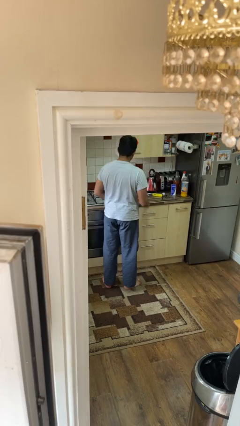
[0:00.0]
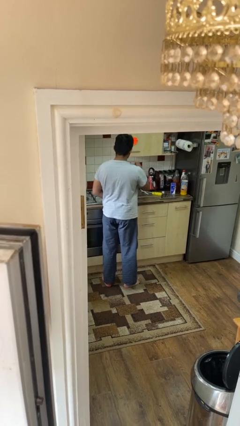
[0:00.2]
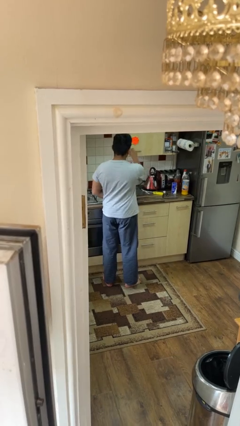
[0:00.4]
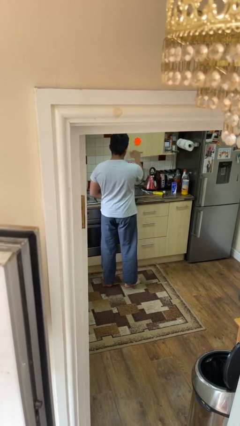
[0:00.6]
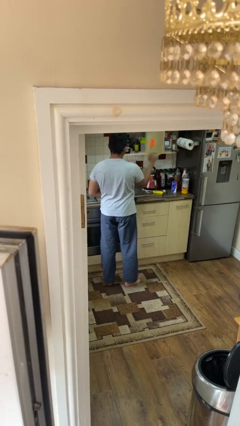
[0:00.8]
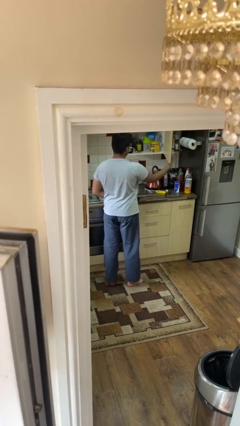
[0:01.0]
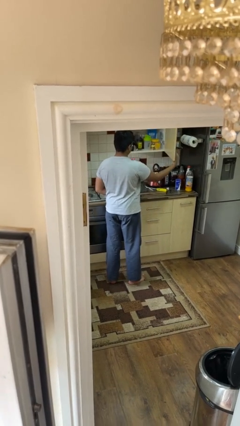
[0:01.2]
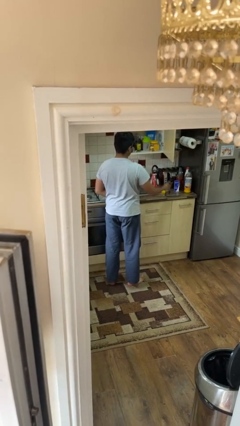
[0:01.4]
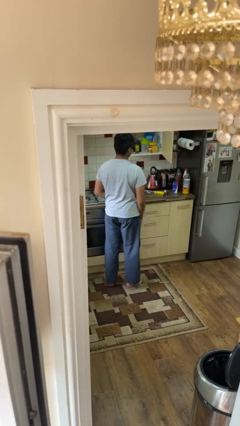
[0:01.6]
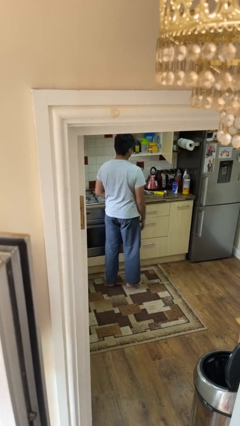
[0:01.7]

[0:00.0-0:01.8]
person opens cabinet

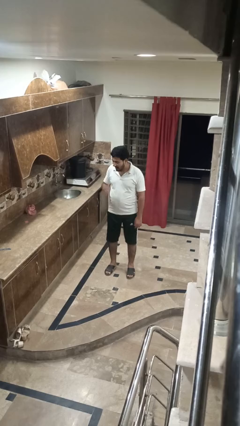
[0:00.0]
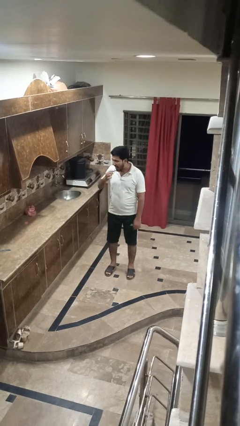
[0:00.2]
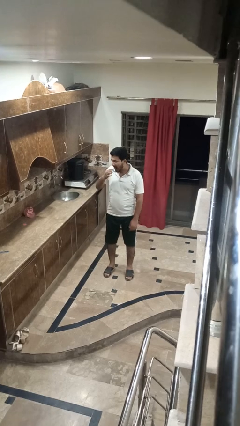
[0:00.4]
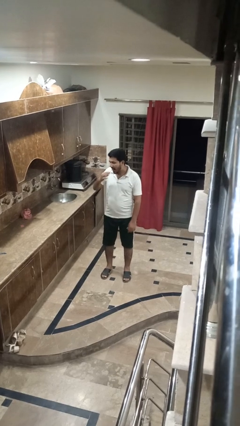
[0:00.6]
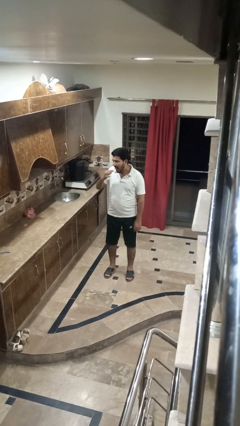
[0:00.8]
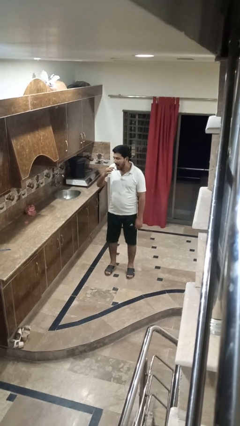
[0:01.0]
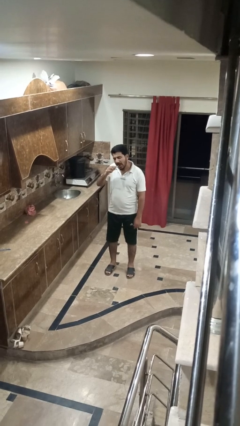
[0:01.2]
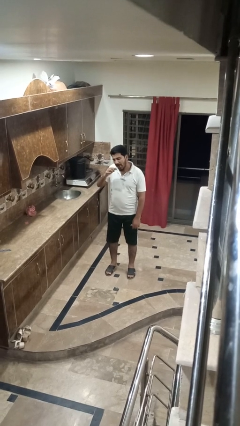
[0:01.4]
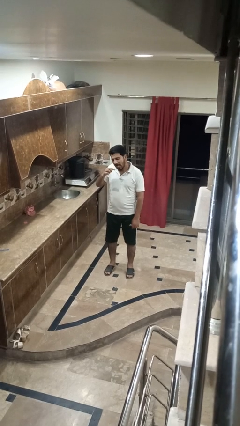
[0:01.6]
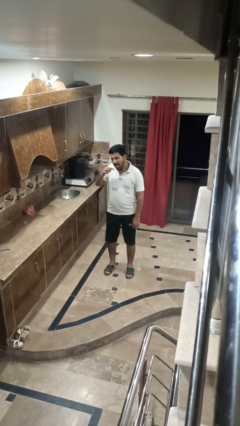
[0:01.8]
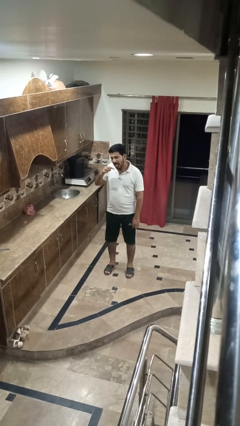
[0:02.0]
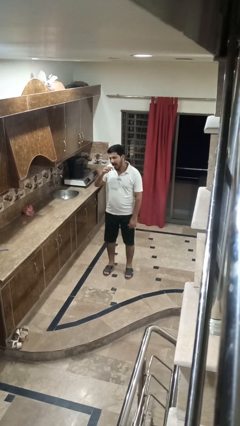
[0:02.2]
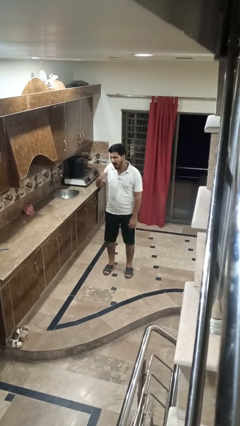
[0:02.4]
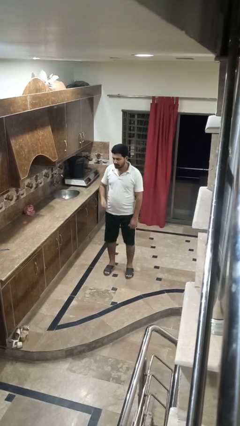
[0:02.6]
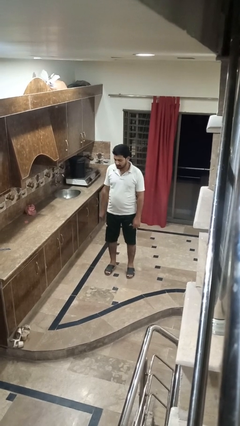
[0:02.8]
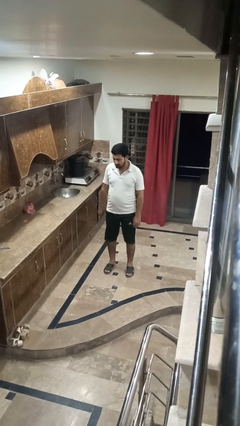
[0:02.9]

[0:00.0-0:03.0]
person brushes teeth

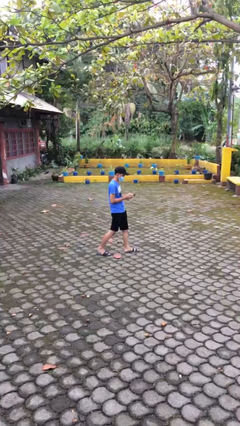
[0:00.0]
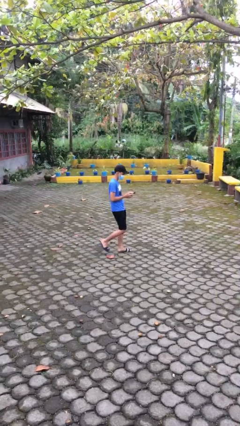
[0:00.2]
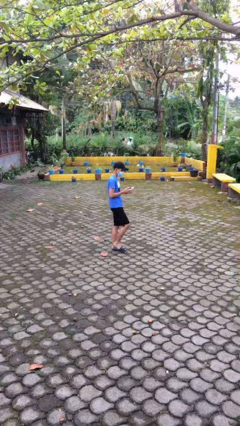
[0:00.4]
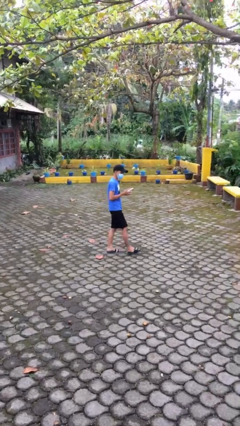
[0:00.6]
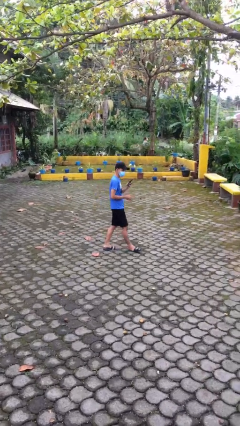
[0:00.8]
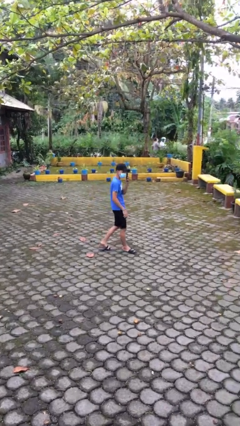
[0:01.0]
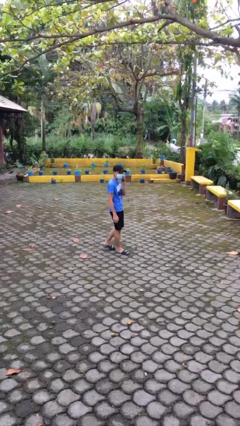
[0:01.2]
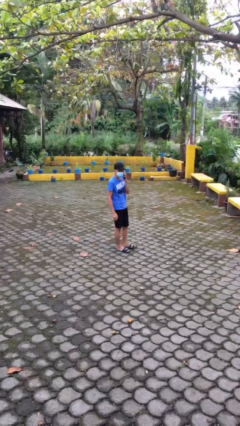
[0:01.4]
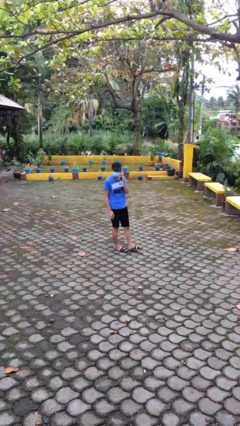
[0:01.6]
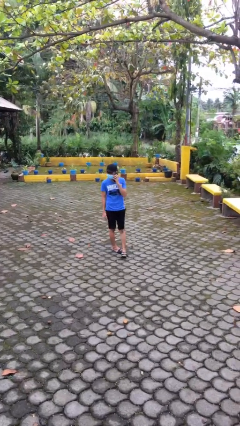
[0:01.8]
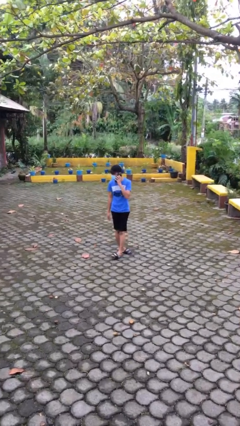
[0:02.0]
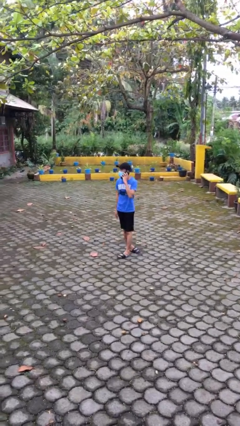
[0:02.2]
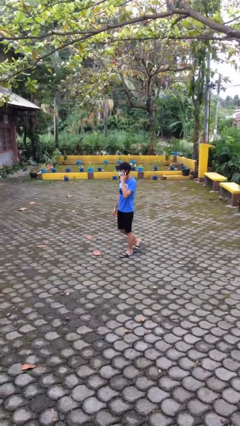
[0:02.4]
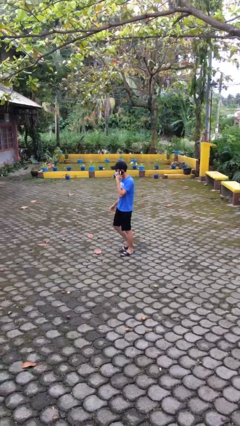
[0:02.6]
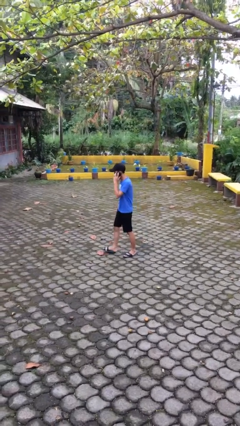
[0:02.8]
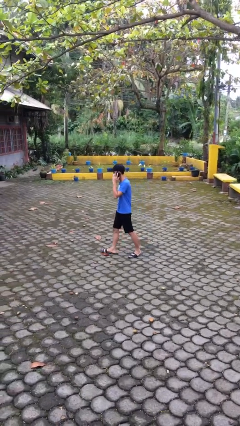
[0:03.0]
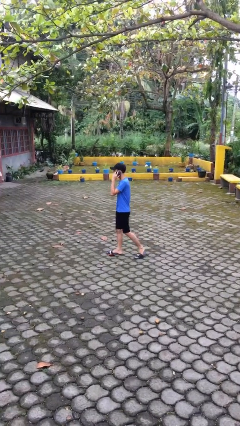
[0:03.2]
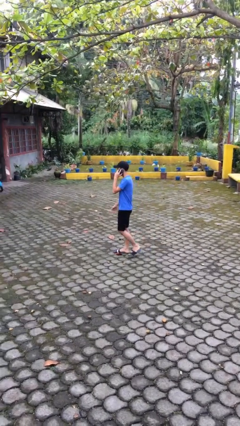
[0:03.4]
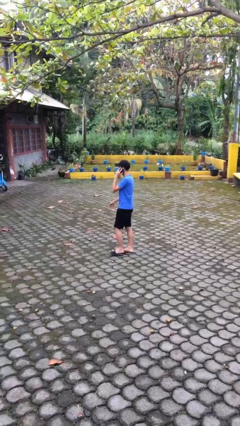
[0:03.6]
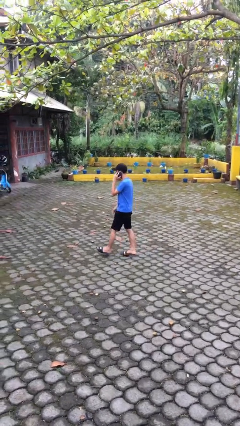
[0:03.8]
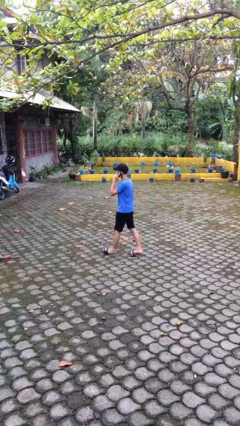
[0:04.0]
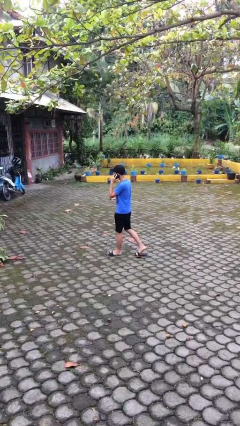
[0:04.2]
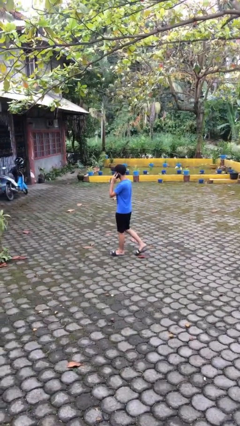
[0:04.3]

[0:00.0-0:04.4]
person talks on phone

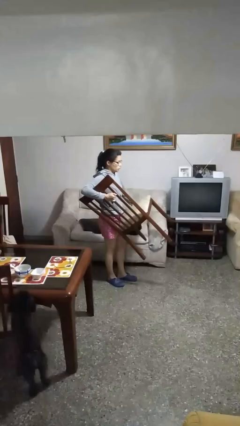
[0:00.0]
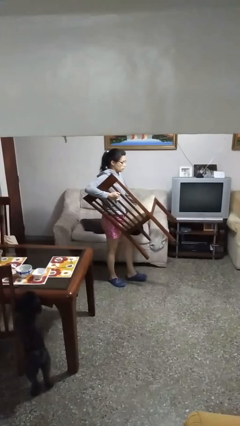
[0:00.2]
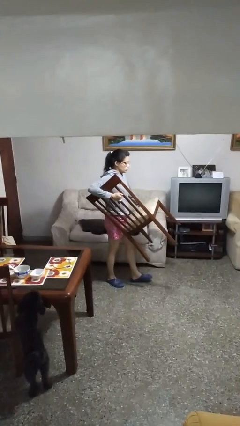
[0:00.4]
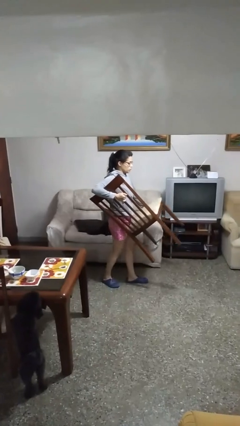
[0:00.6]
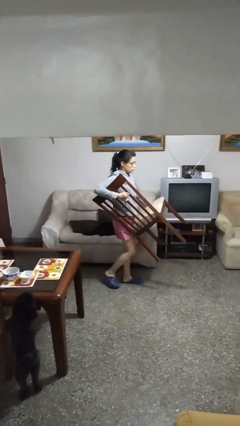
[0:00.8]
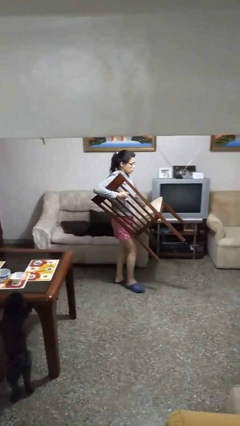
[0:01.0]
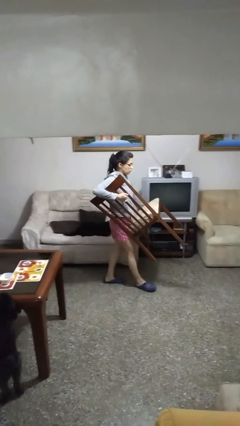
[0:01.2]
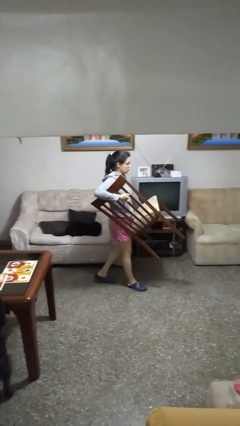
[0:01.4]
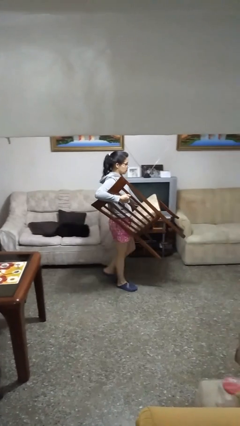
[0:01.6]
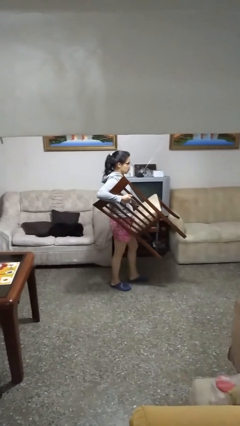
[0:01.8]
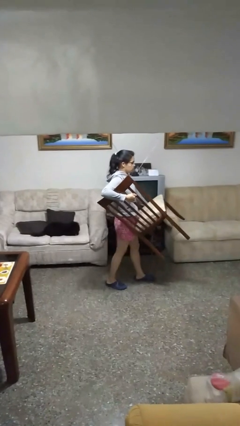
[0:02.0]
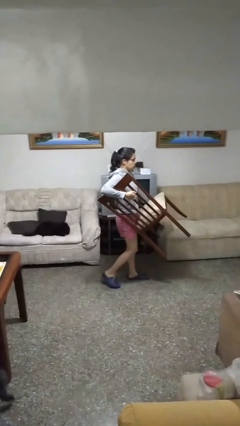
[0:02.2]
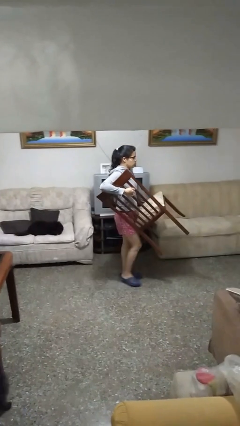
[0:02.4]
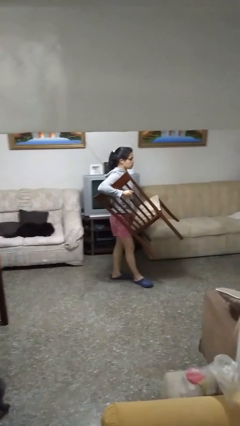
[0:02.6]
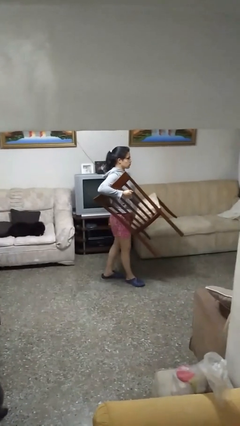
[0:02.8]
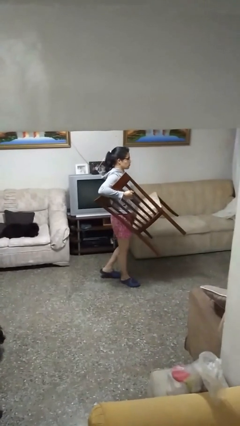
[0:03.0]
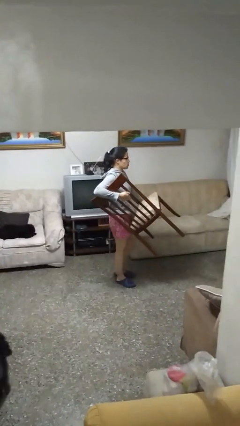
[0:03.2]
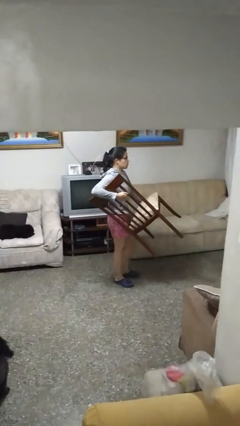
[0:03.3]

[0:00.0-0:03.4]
person carries furniture

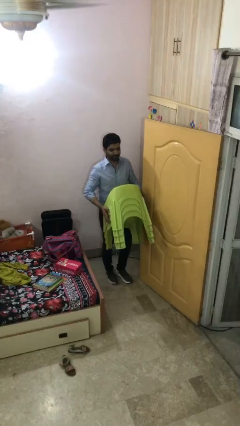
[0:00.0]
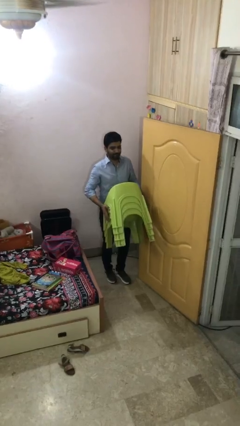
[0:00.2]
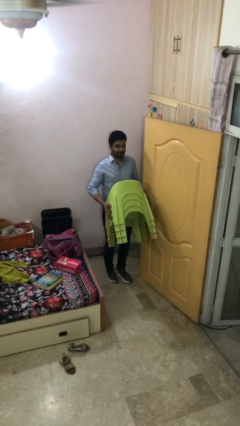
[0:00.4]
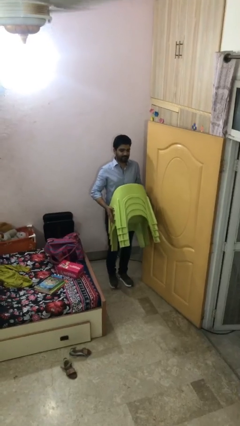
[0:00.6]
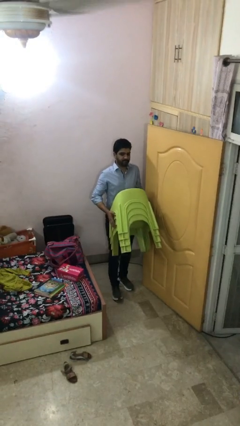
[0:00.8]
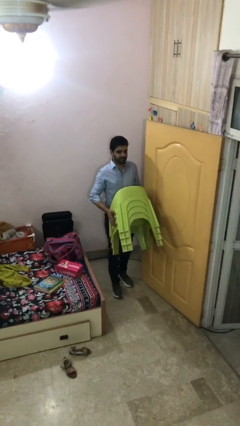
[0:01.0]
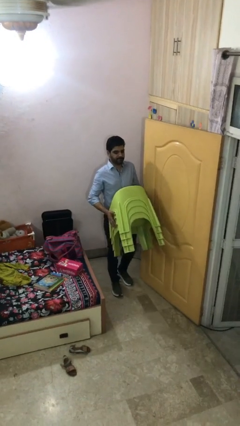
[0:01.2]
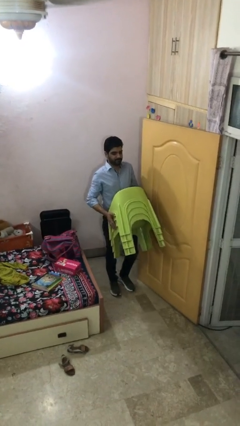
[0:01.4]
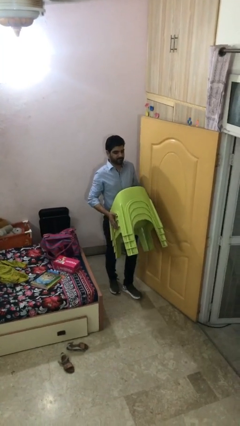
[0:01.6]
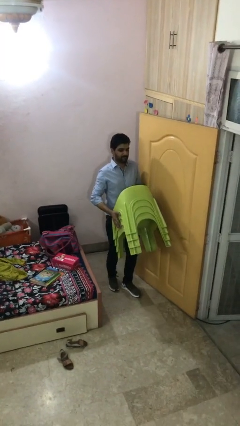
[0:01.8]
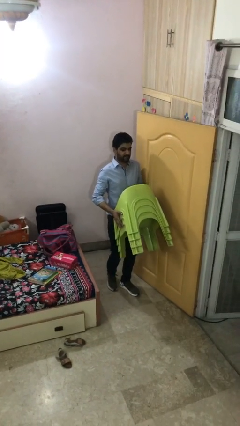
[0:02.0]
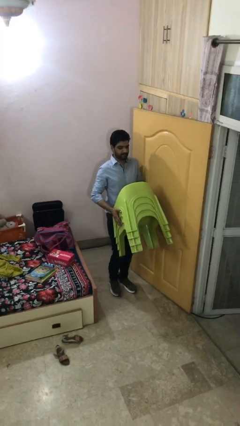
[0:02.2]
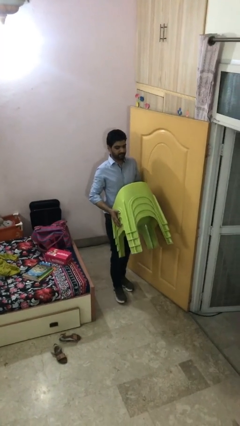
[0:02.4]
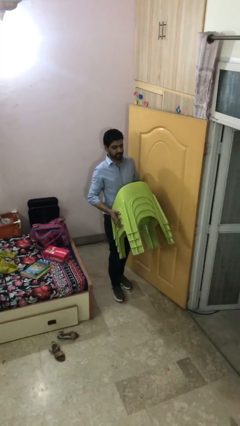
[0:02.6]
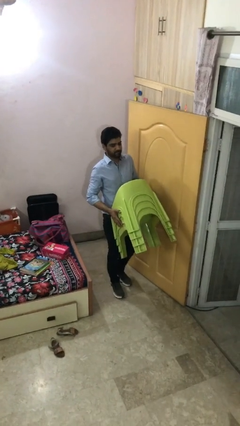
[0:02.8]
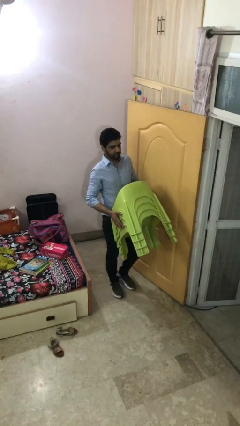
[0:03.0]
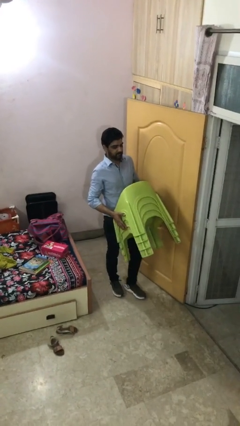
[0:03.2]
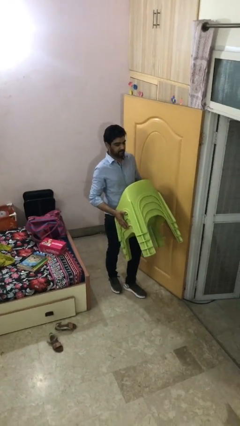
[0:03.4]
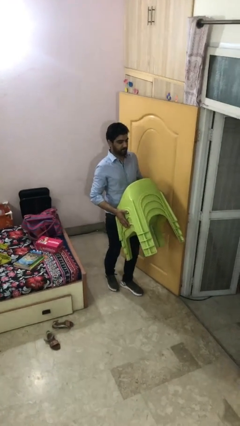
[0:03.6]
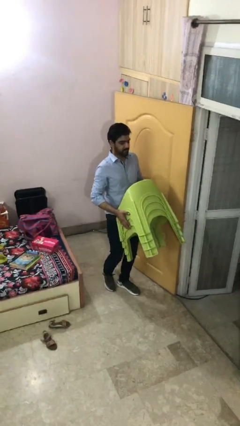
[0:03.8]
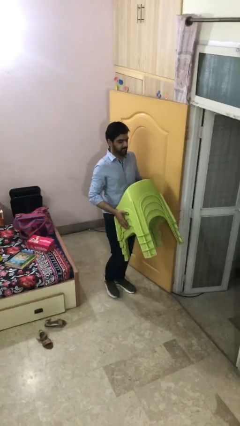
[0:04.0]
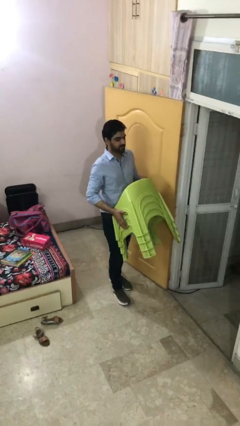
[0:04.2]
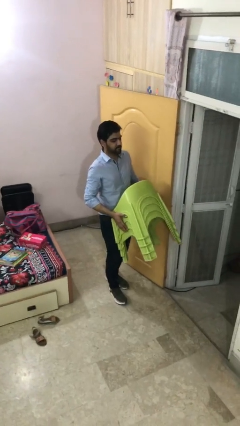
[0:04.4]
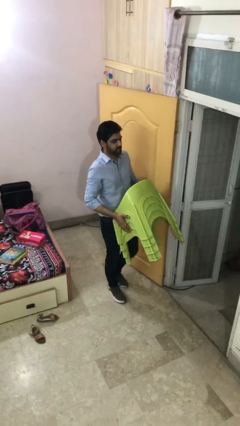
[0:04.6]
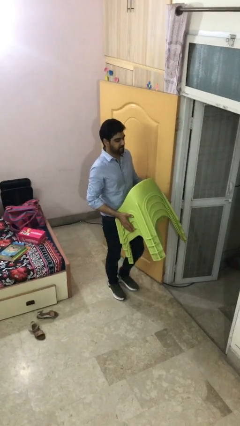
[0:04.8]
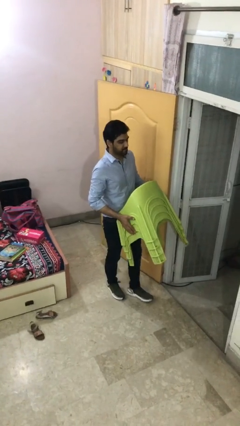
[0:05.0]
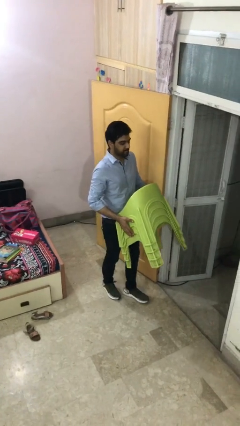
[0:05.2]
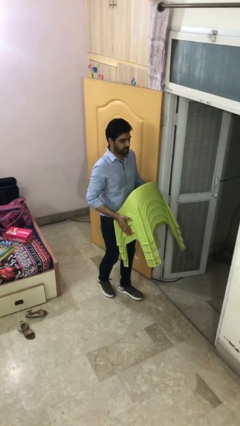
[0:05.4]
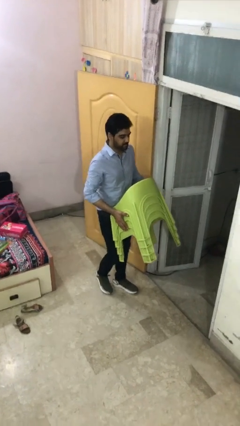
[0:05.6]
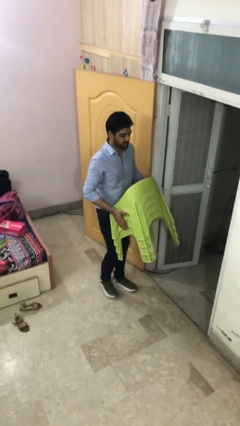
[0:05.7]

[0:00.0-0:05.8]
person carries heavy object
